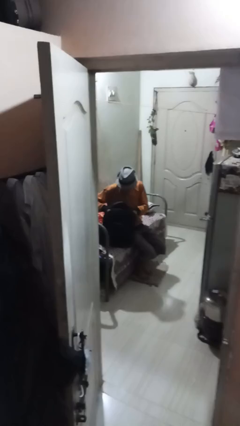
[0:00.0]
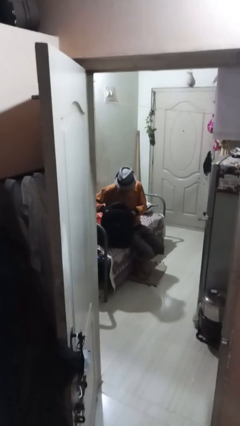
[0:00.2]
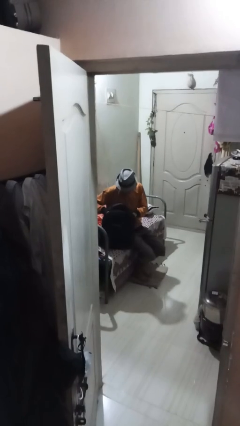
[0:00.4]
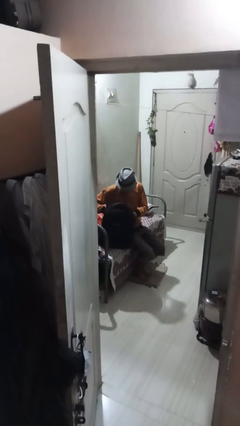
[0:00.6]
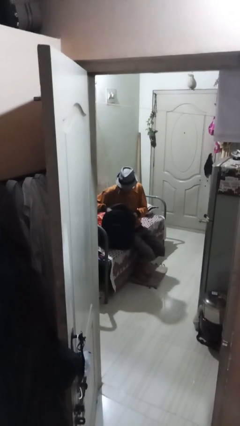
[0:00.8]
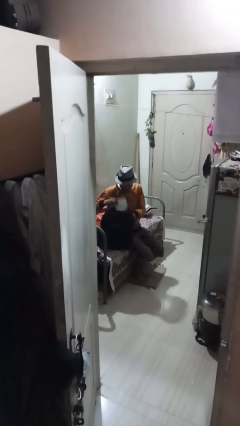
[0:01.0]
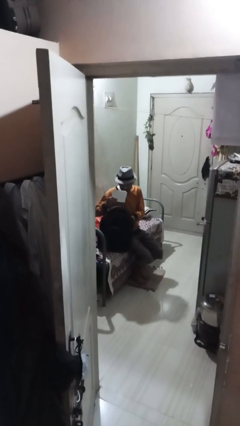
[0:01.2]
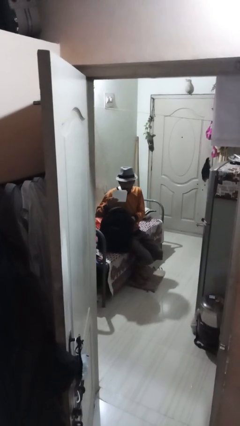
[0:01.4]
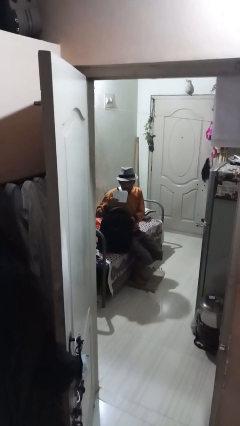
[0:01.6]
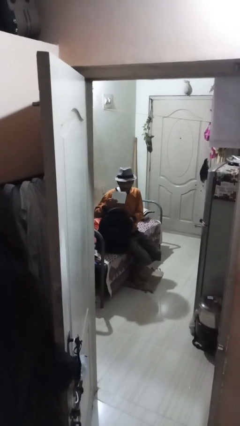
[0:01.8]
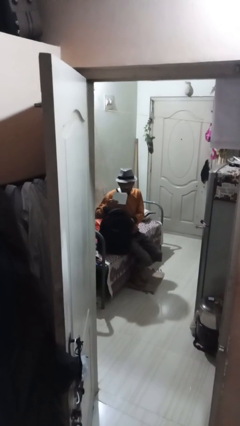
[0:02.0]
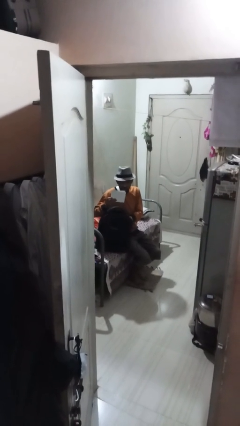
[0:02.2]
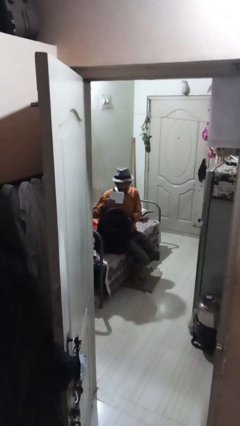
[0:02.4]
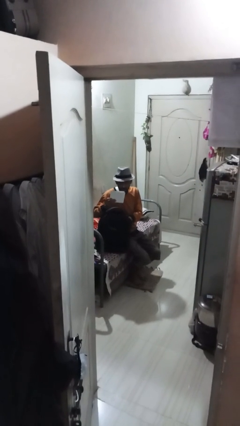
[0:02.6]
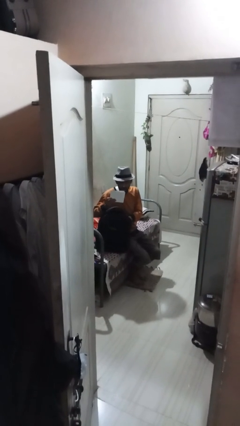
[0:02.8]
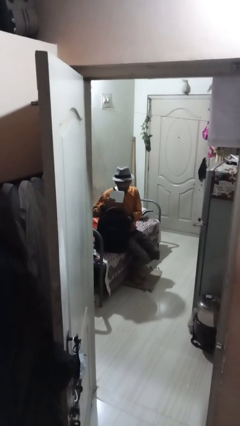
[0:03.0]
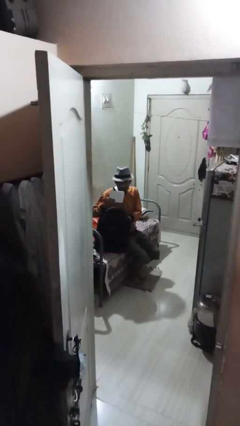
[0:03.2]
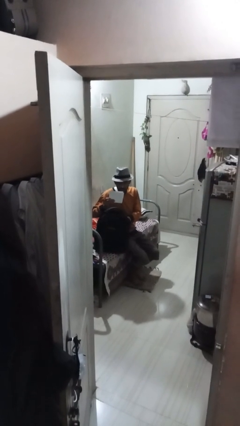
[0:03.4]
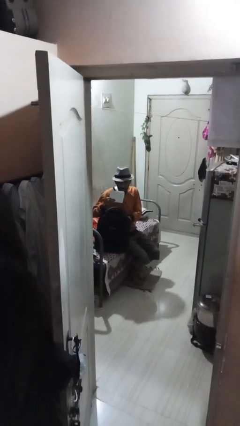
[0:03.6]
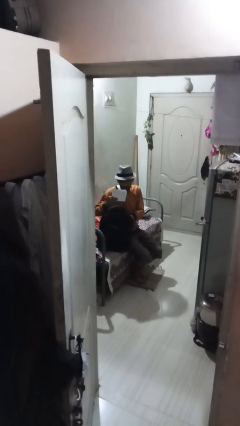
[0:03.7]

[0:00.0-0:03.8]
person takes object from backpack

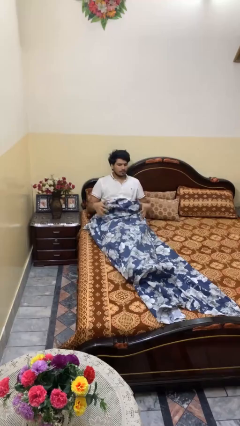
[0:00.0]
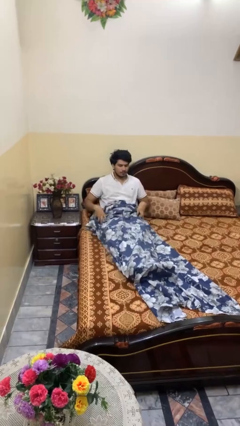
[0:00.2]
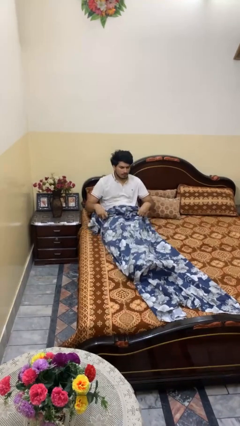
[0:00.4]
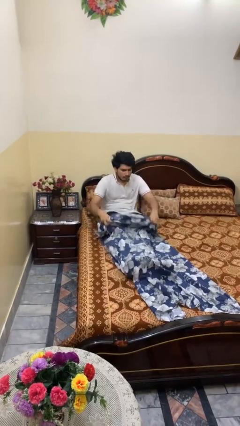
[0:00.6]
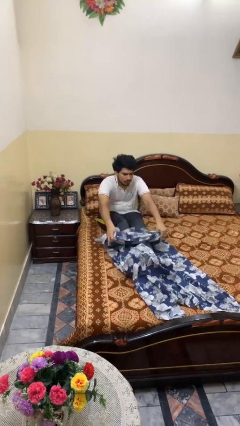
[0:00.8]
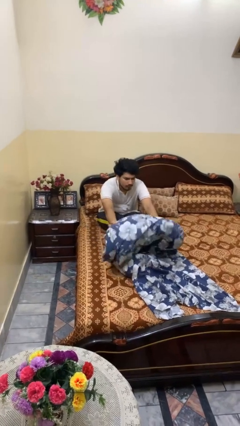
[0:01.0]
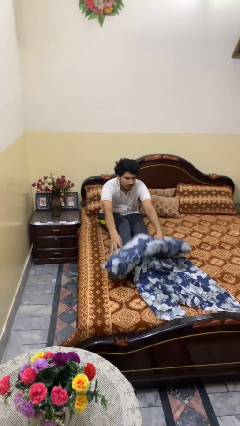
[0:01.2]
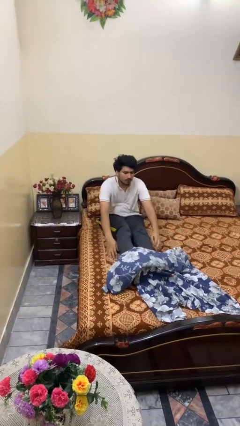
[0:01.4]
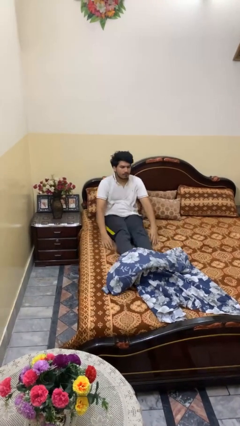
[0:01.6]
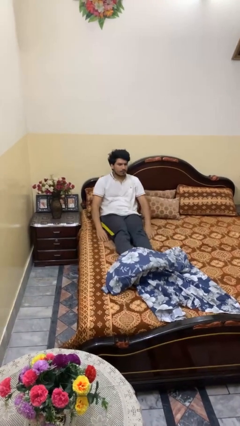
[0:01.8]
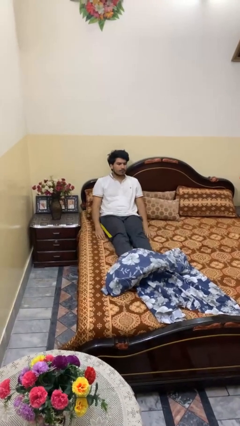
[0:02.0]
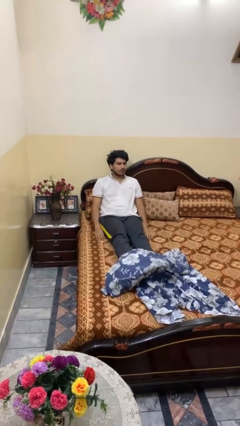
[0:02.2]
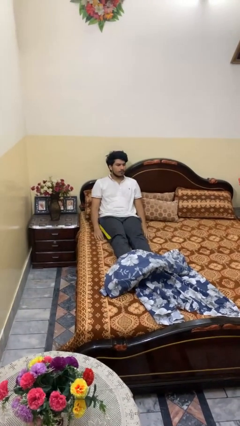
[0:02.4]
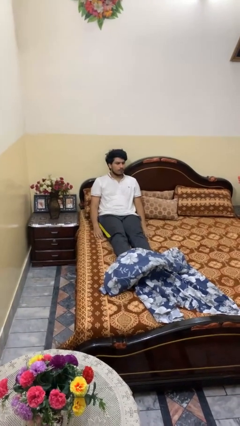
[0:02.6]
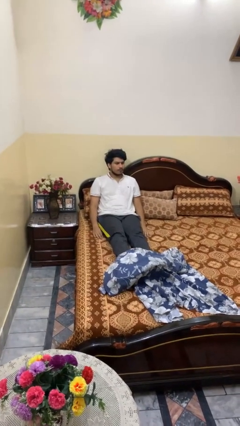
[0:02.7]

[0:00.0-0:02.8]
person uncovers with bedsheets

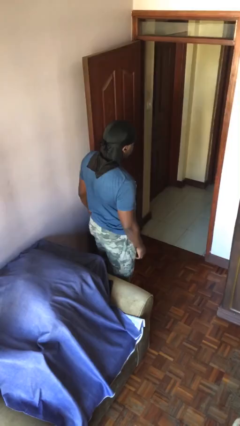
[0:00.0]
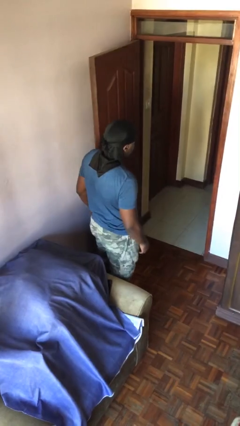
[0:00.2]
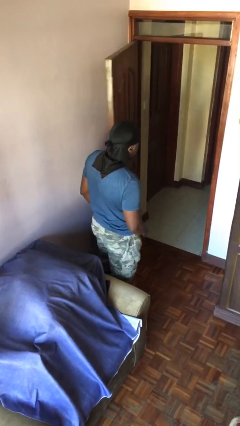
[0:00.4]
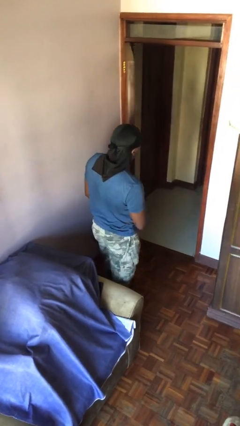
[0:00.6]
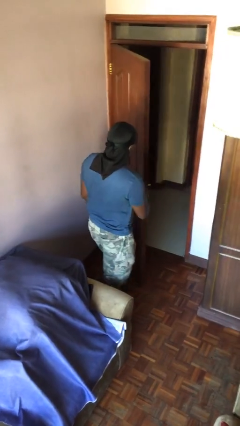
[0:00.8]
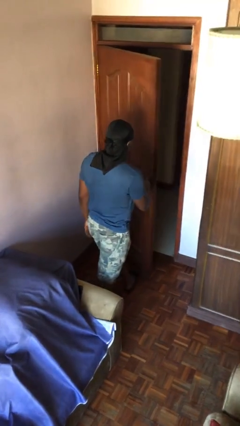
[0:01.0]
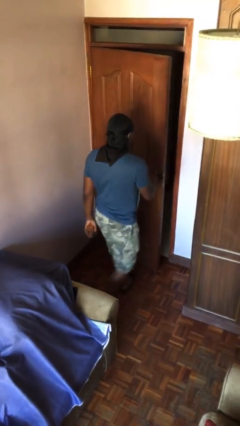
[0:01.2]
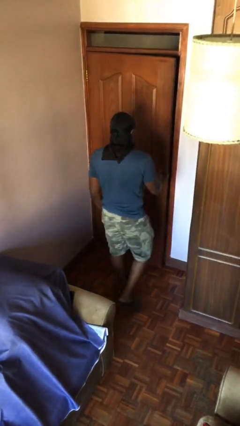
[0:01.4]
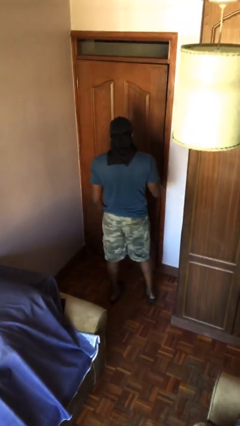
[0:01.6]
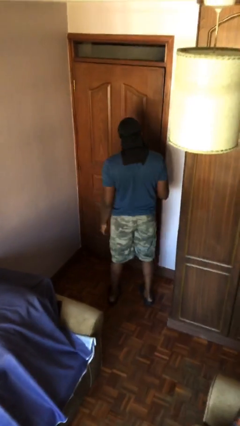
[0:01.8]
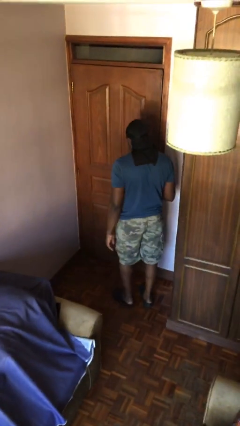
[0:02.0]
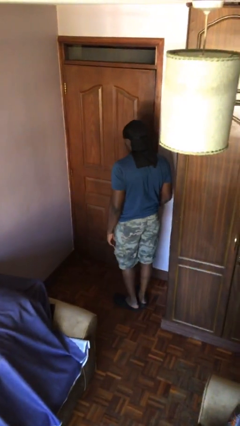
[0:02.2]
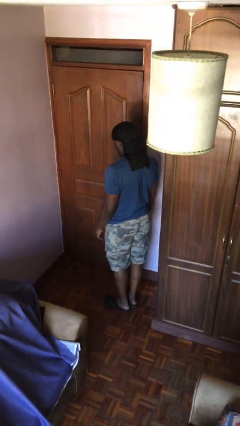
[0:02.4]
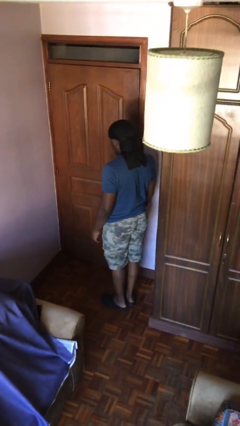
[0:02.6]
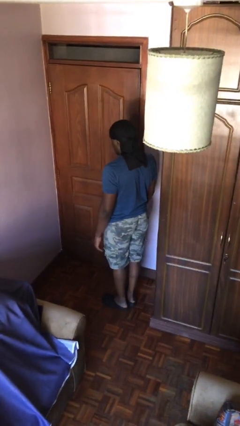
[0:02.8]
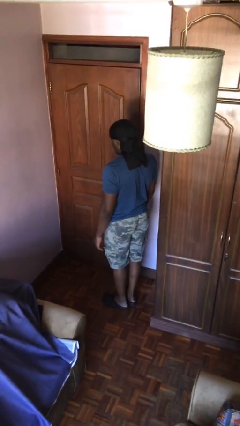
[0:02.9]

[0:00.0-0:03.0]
person closes facility door

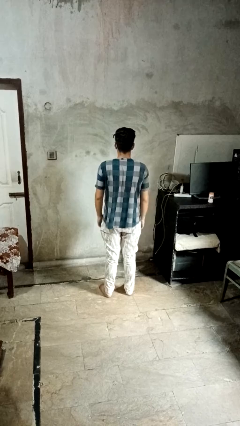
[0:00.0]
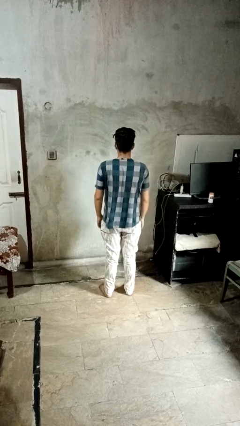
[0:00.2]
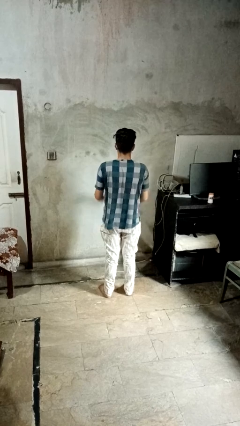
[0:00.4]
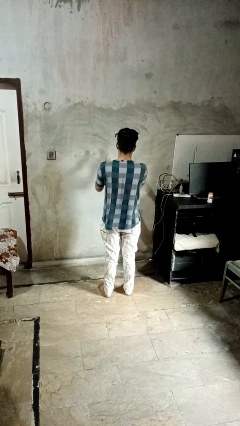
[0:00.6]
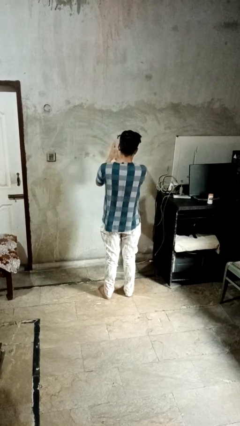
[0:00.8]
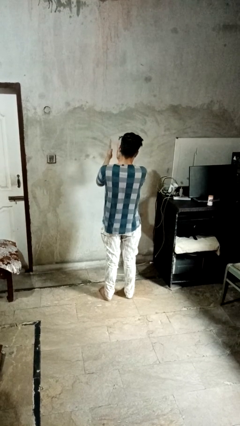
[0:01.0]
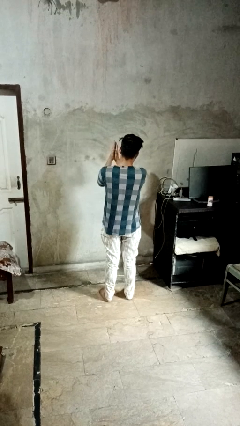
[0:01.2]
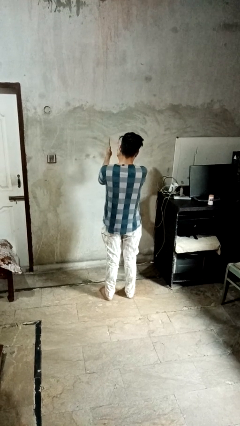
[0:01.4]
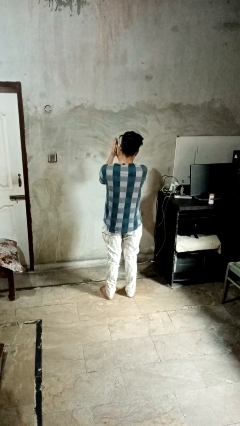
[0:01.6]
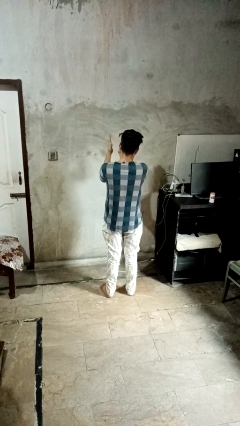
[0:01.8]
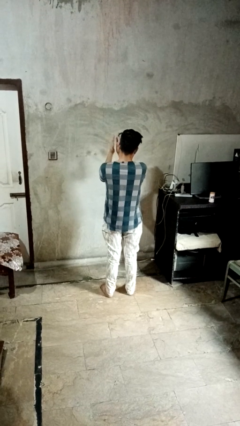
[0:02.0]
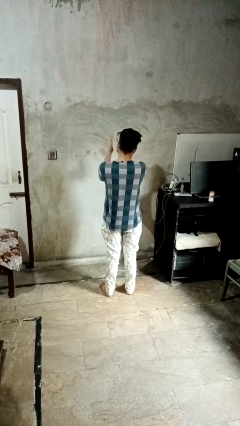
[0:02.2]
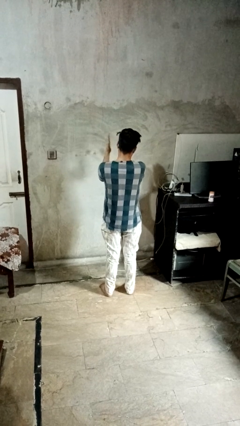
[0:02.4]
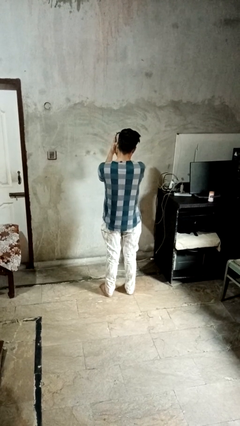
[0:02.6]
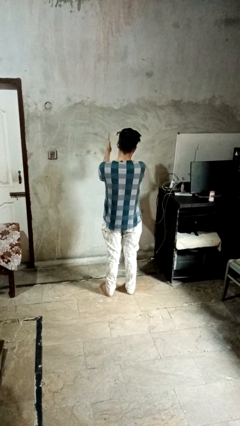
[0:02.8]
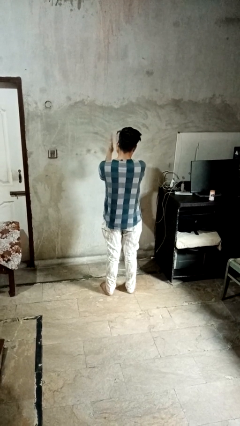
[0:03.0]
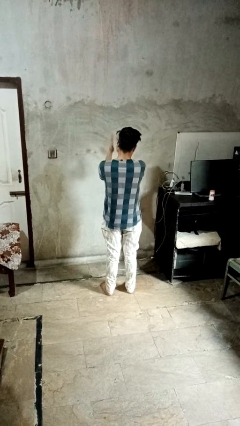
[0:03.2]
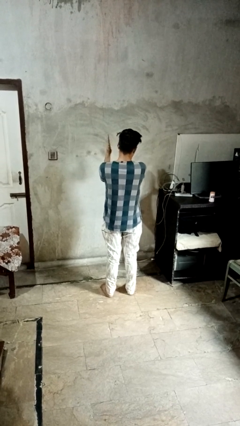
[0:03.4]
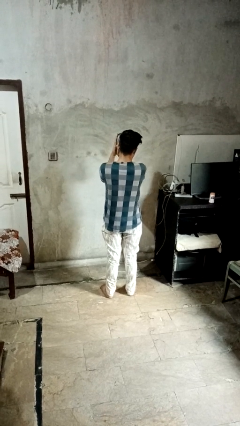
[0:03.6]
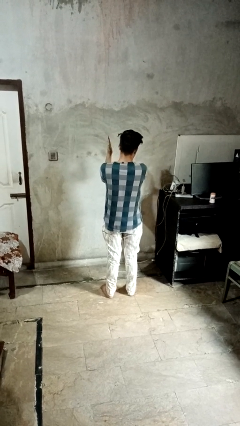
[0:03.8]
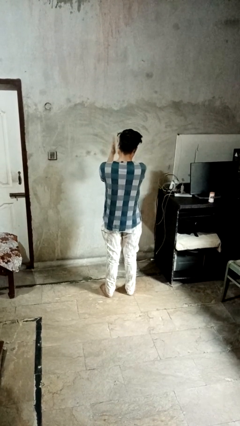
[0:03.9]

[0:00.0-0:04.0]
person claps hands

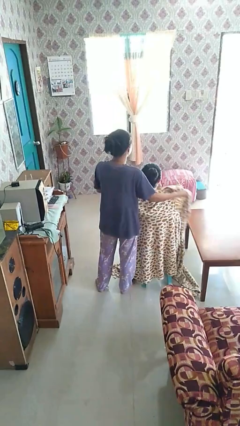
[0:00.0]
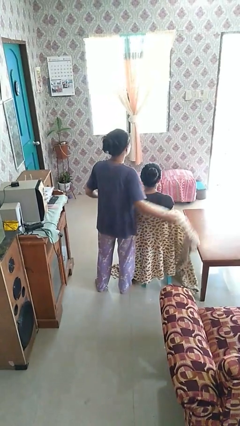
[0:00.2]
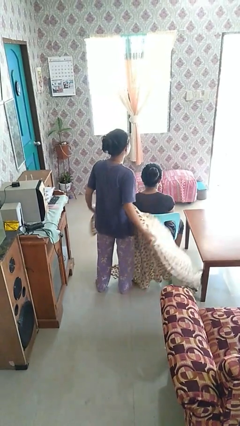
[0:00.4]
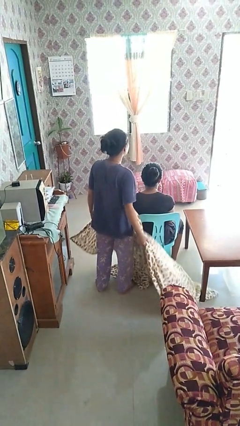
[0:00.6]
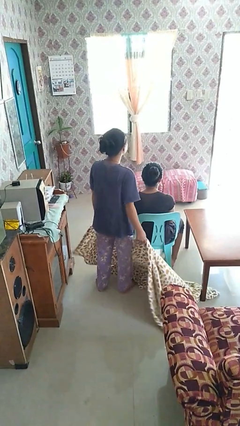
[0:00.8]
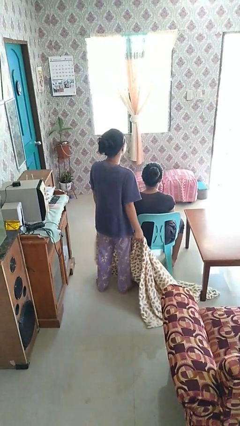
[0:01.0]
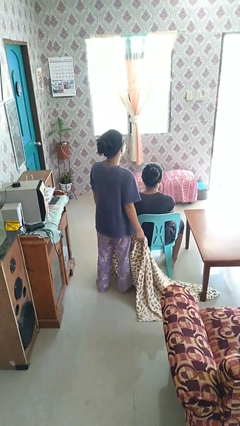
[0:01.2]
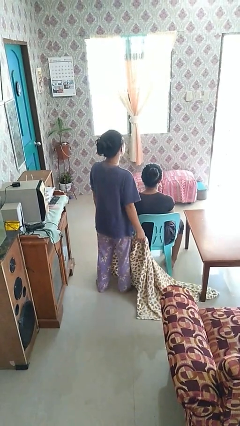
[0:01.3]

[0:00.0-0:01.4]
person uncovers friend with blanket

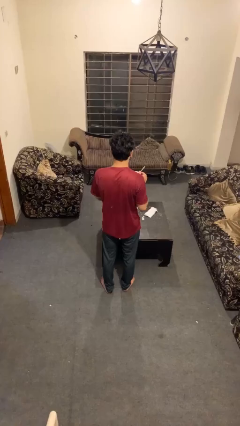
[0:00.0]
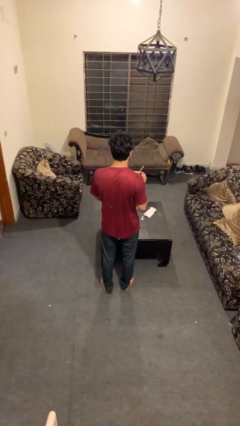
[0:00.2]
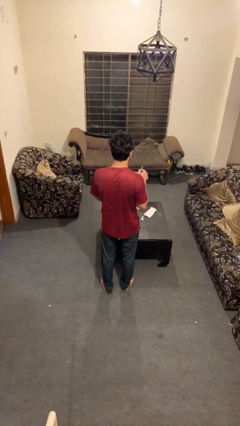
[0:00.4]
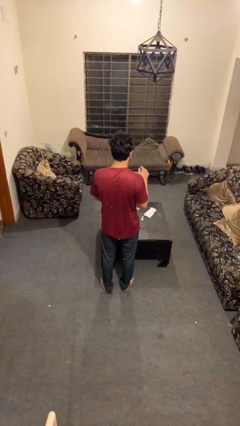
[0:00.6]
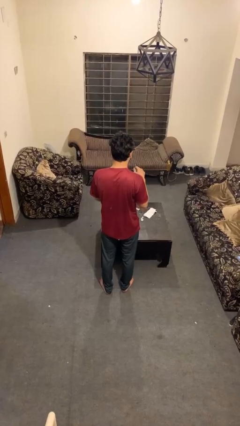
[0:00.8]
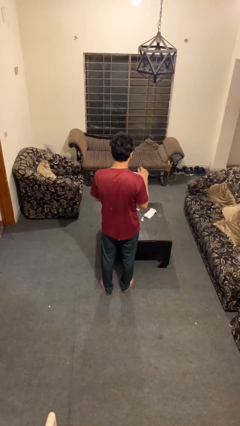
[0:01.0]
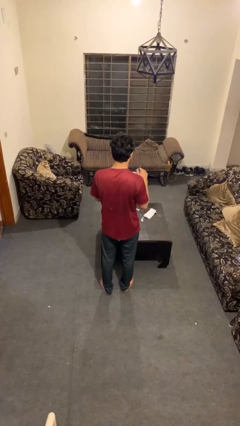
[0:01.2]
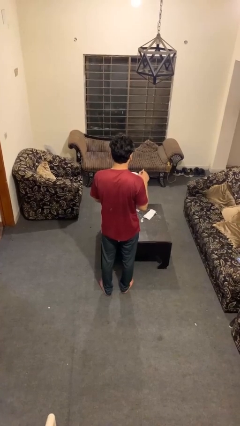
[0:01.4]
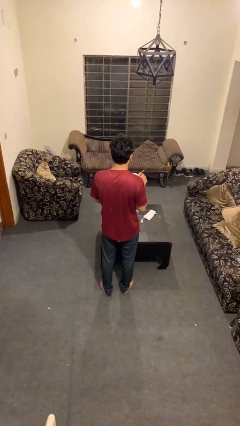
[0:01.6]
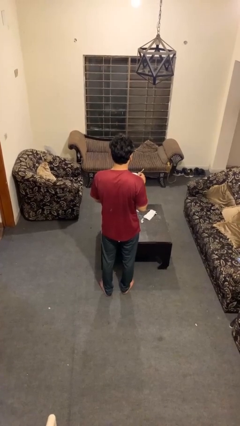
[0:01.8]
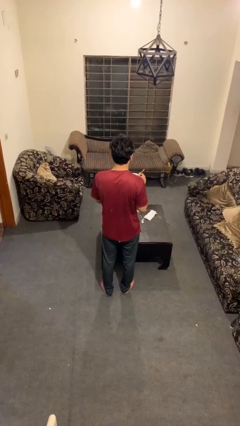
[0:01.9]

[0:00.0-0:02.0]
person stirs mug
